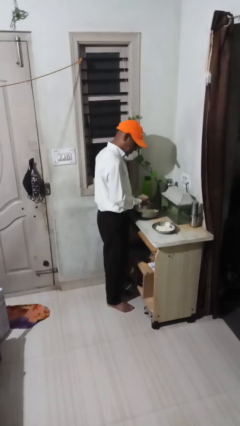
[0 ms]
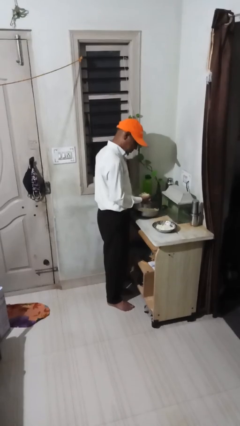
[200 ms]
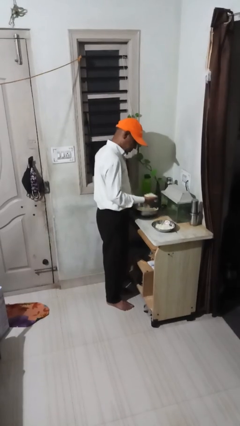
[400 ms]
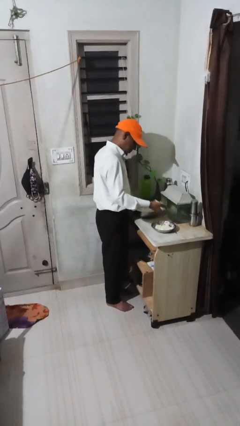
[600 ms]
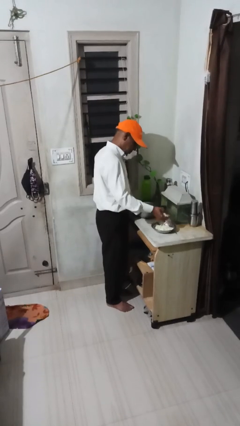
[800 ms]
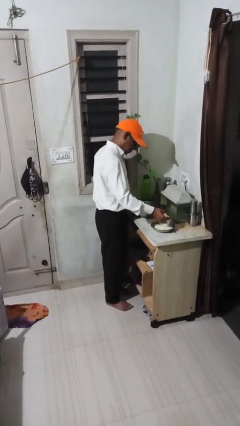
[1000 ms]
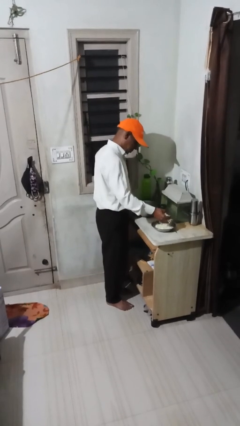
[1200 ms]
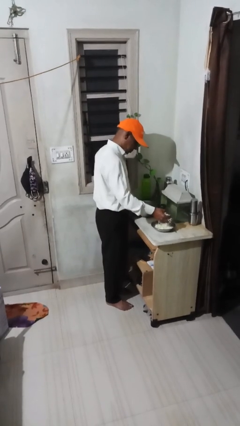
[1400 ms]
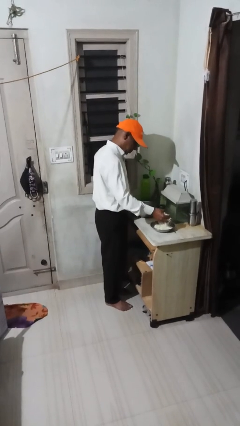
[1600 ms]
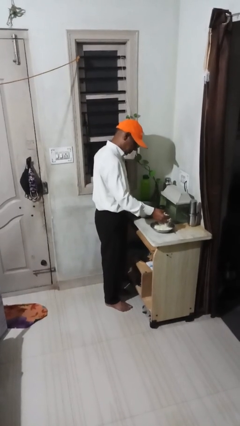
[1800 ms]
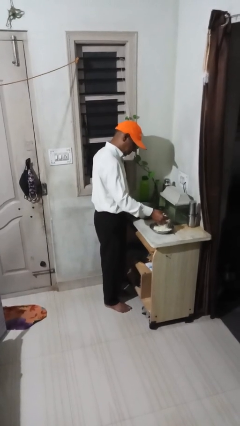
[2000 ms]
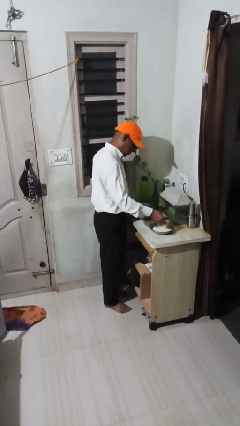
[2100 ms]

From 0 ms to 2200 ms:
person pours into bowl

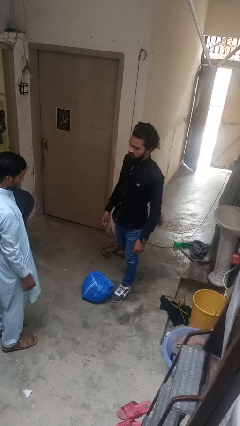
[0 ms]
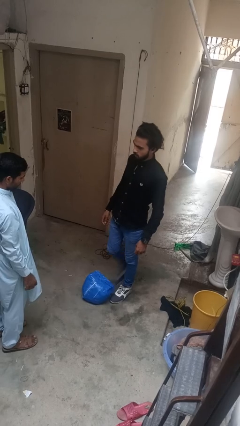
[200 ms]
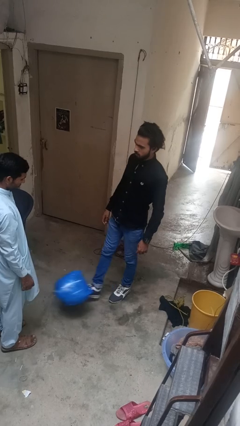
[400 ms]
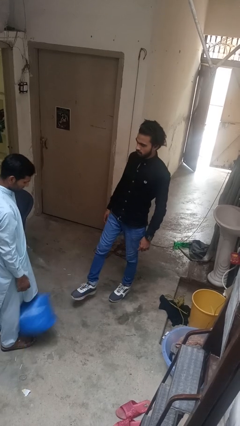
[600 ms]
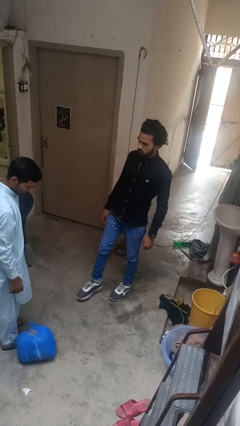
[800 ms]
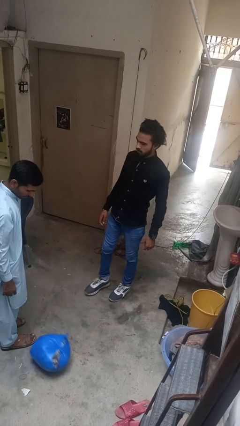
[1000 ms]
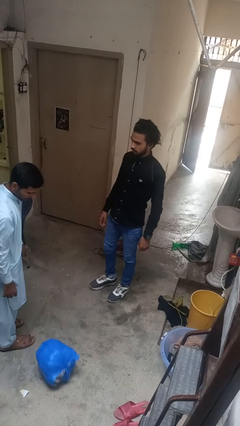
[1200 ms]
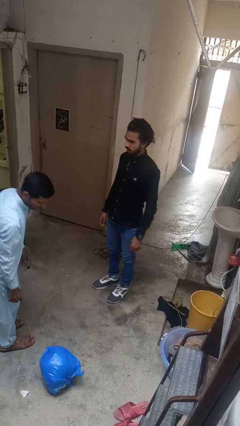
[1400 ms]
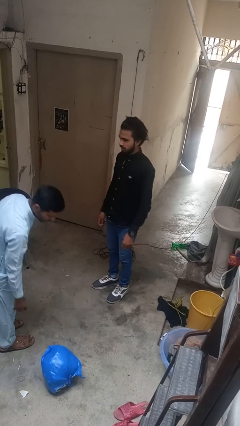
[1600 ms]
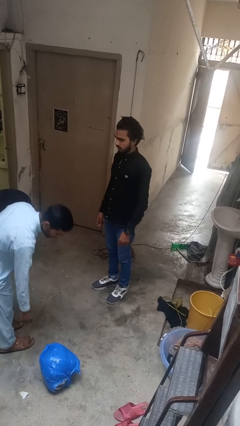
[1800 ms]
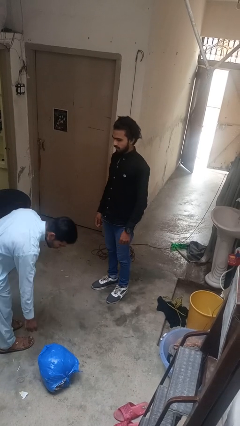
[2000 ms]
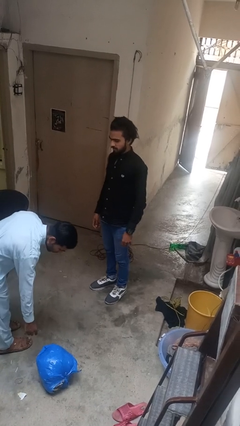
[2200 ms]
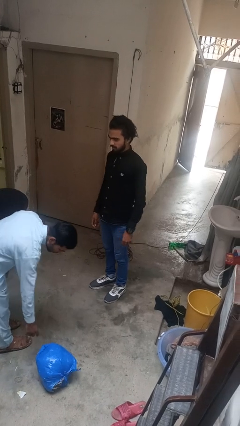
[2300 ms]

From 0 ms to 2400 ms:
person kicks object to person

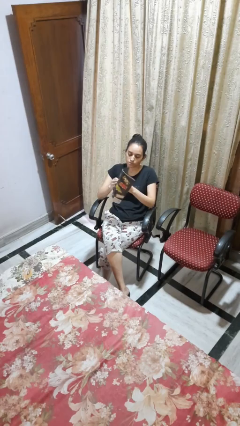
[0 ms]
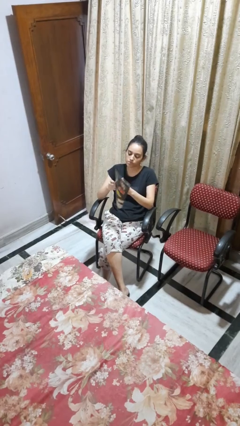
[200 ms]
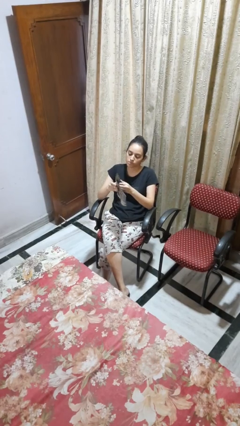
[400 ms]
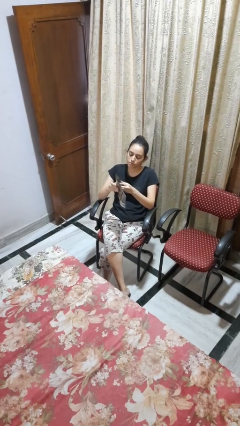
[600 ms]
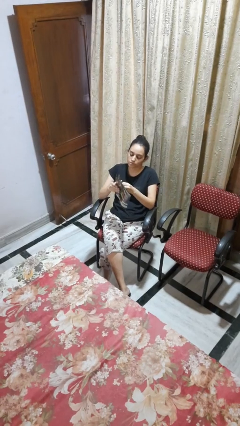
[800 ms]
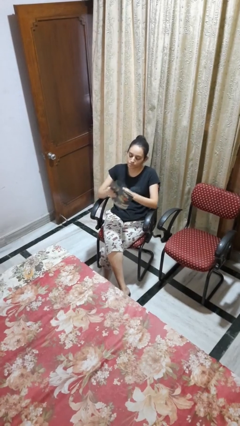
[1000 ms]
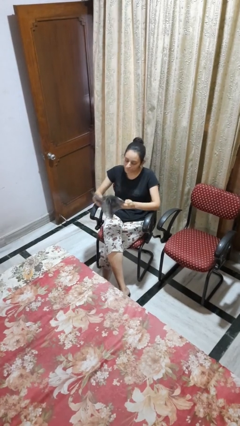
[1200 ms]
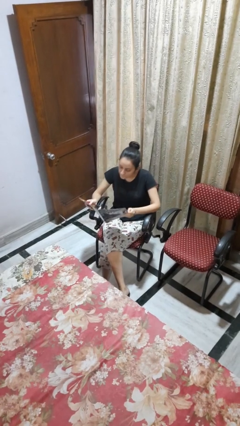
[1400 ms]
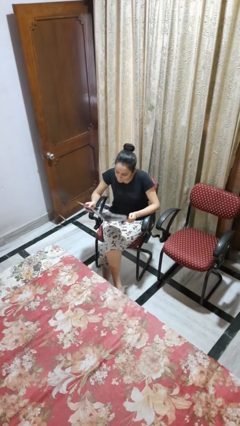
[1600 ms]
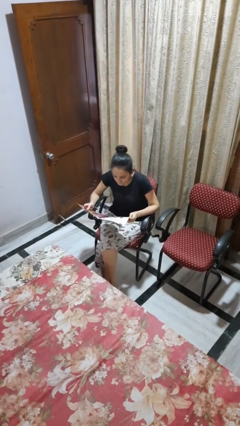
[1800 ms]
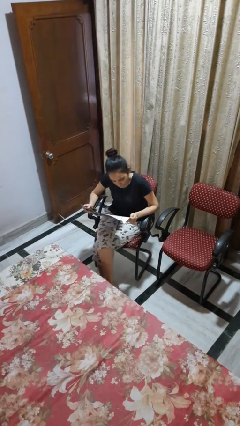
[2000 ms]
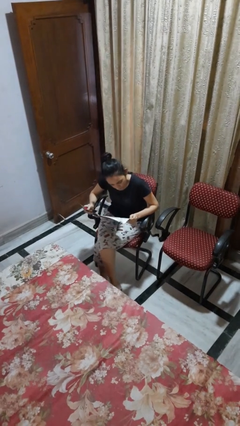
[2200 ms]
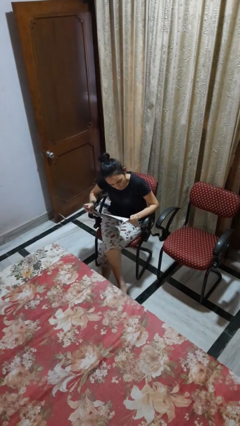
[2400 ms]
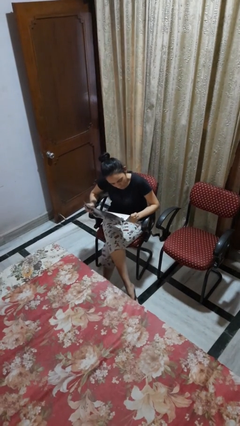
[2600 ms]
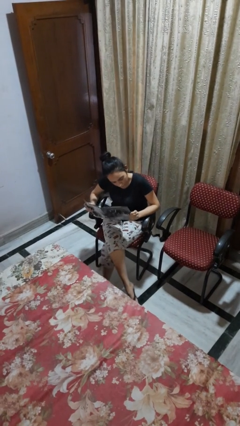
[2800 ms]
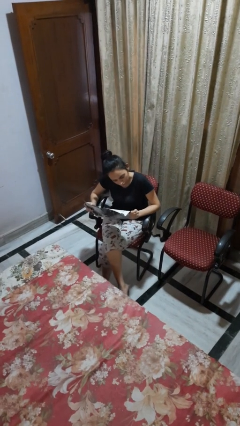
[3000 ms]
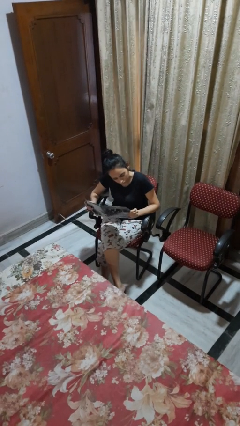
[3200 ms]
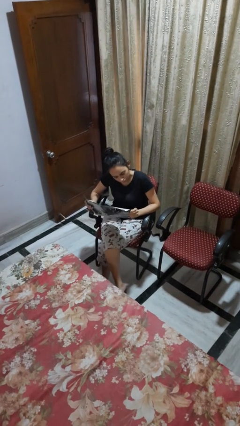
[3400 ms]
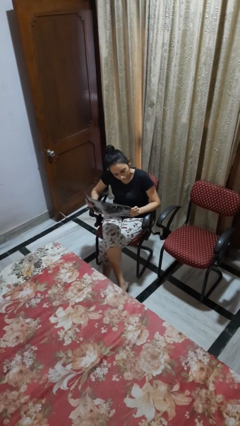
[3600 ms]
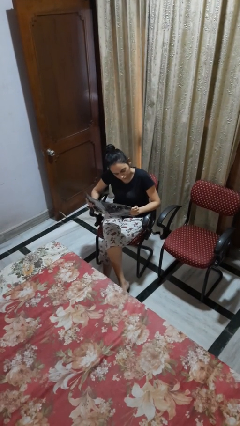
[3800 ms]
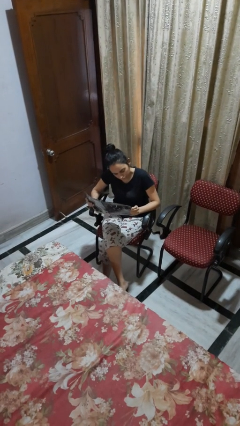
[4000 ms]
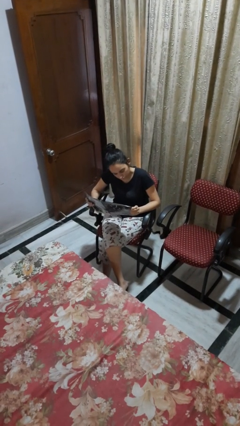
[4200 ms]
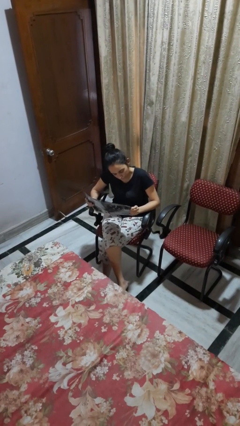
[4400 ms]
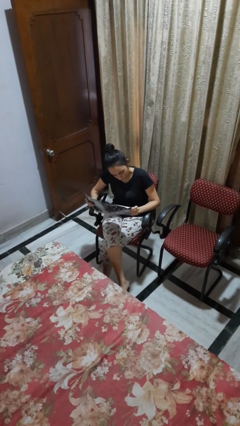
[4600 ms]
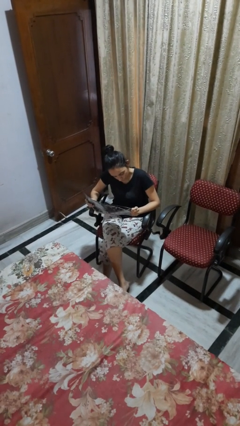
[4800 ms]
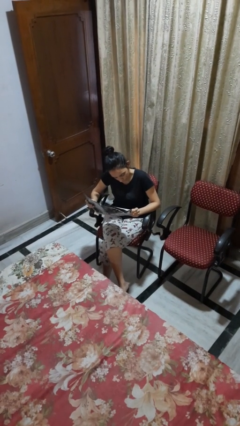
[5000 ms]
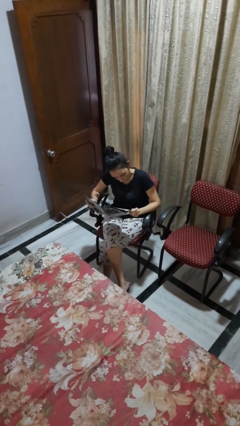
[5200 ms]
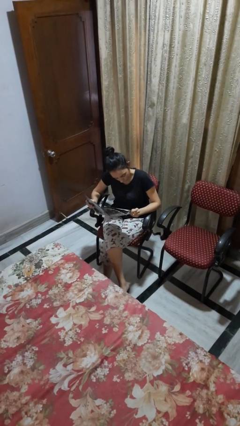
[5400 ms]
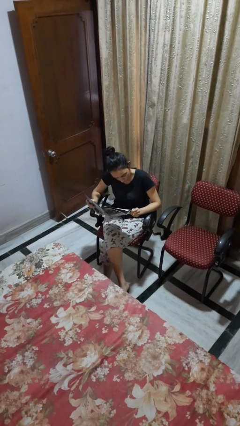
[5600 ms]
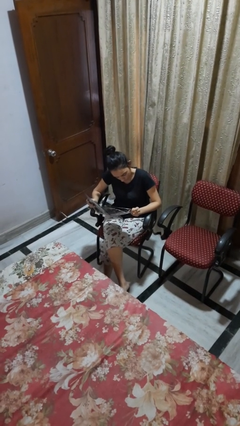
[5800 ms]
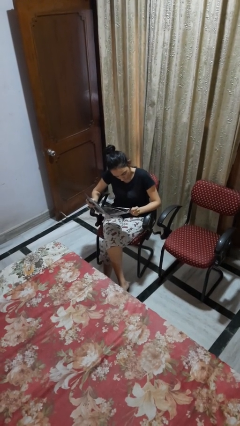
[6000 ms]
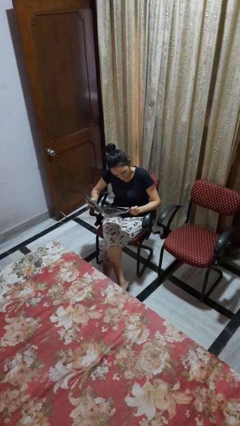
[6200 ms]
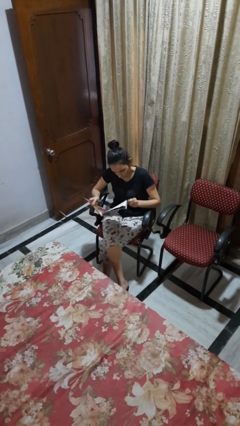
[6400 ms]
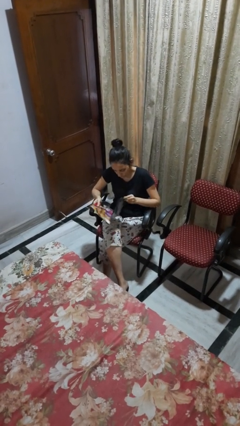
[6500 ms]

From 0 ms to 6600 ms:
person reads magazine

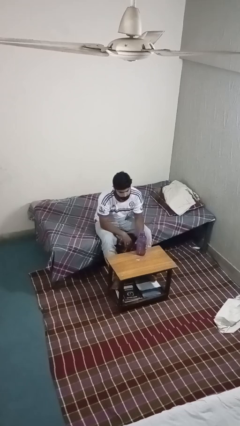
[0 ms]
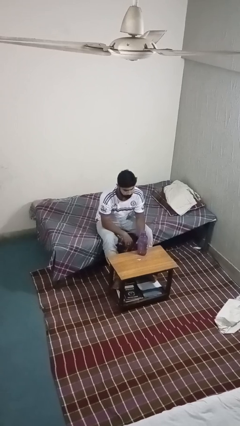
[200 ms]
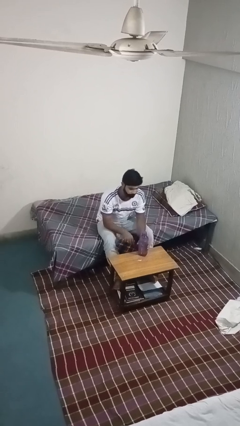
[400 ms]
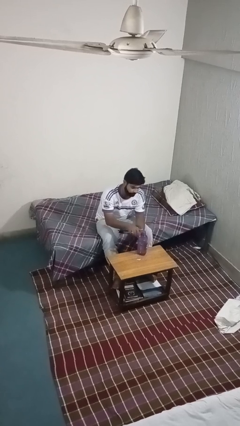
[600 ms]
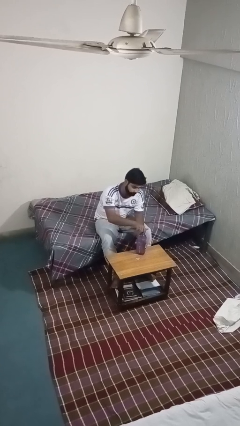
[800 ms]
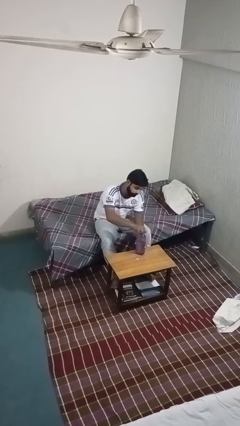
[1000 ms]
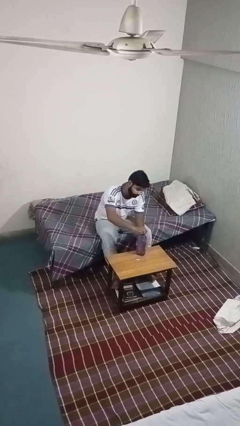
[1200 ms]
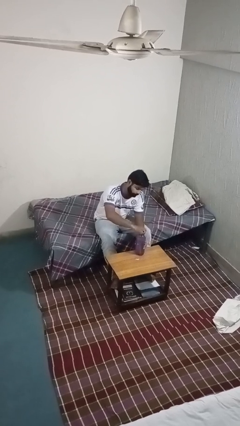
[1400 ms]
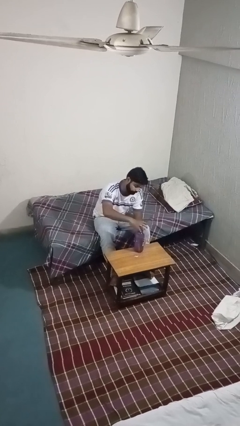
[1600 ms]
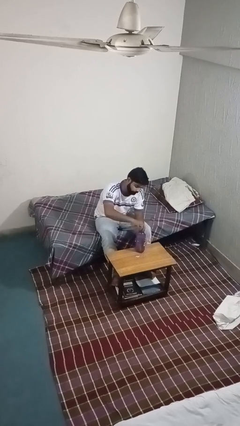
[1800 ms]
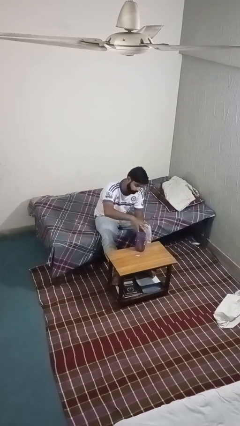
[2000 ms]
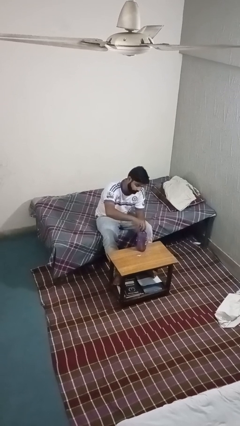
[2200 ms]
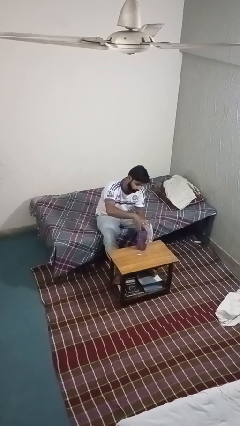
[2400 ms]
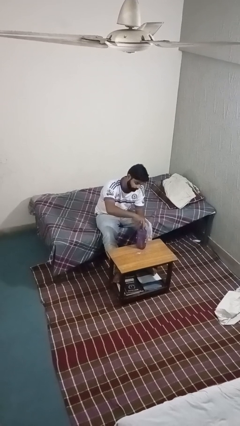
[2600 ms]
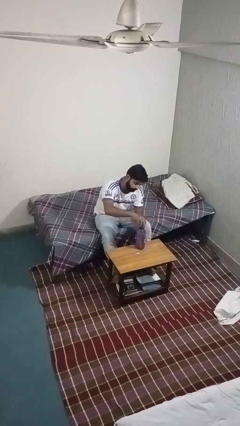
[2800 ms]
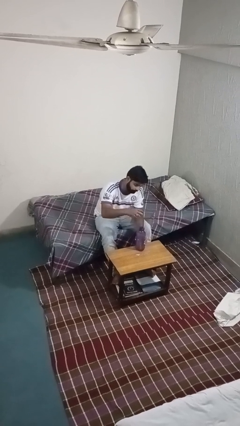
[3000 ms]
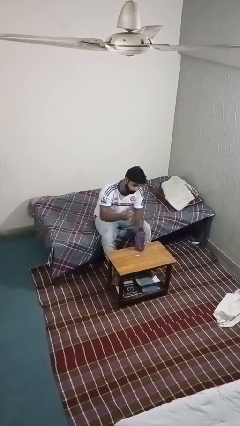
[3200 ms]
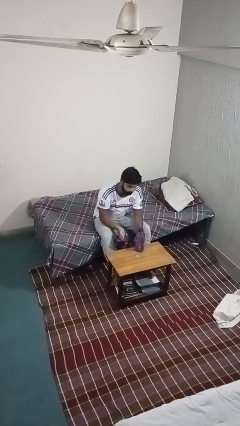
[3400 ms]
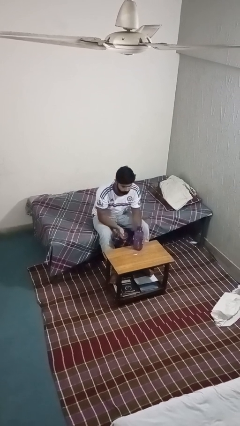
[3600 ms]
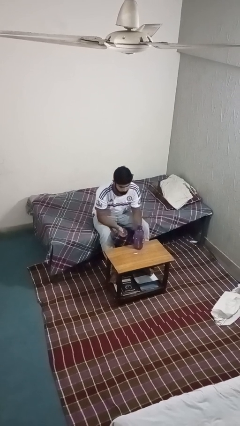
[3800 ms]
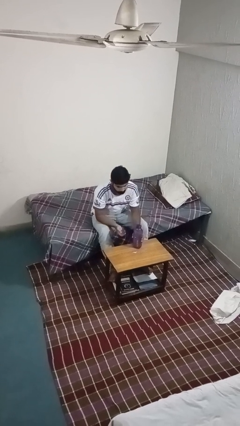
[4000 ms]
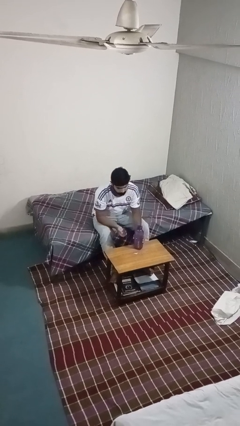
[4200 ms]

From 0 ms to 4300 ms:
person unscrews lid from bottle

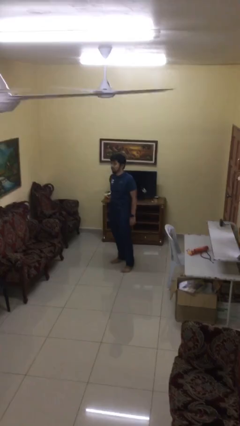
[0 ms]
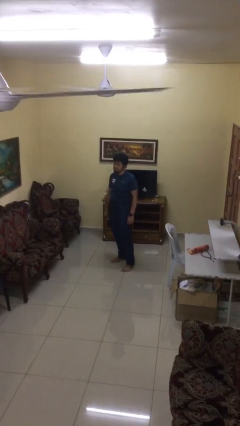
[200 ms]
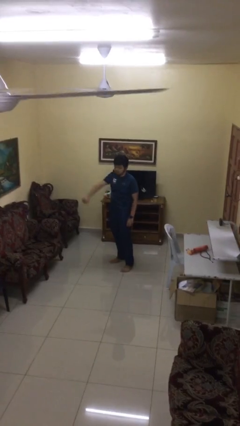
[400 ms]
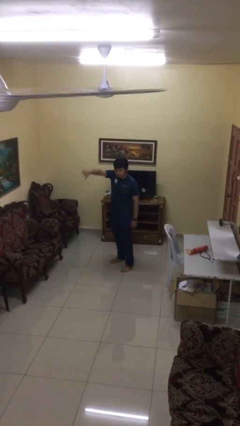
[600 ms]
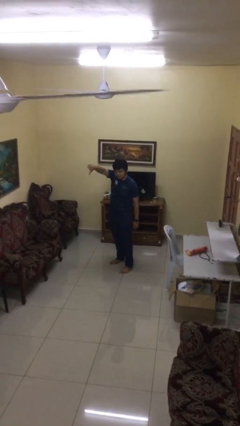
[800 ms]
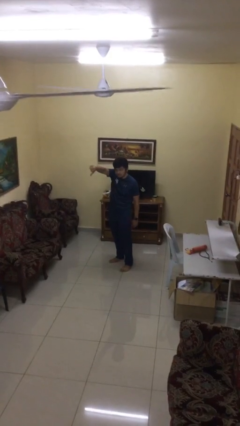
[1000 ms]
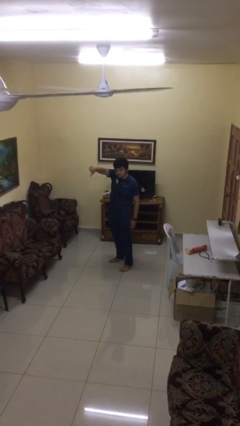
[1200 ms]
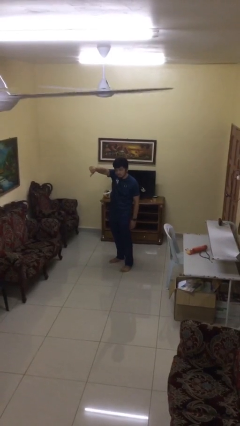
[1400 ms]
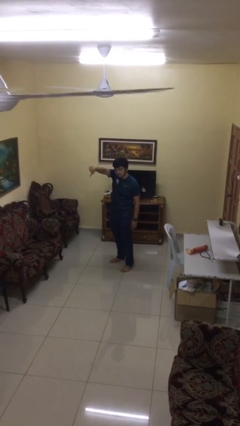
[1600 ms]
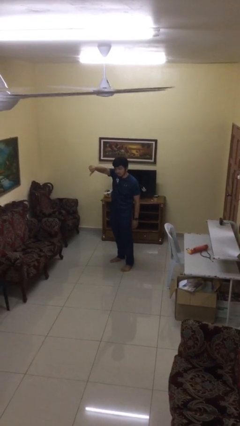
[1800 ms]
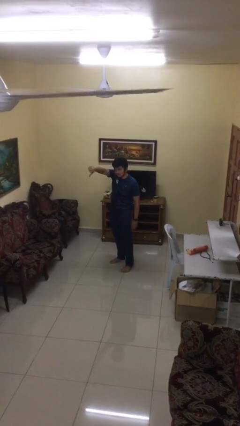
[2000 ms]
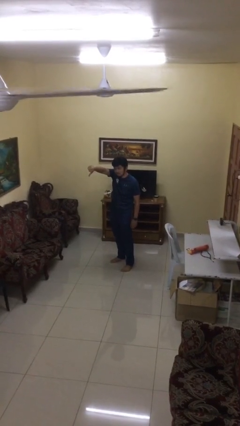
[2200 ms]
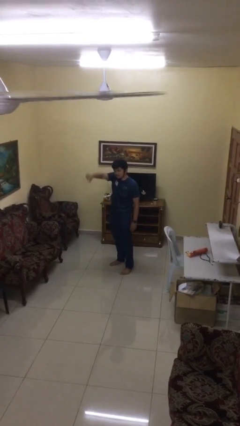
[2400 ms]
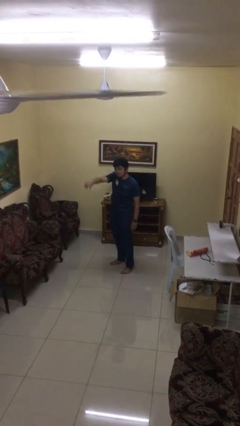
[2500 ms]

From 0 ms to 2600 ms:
person gestures thumbs down
